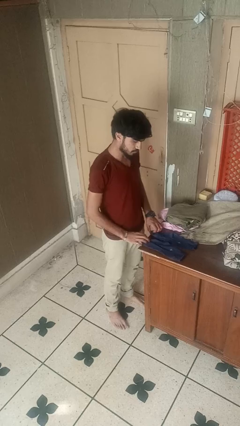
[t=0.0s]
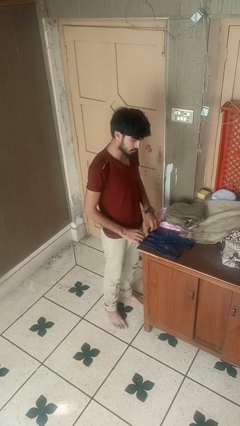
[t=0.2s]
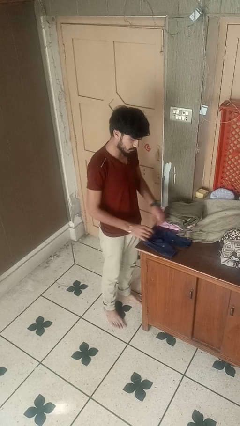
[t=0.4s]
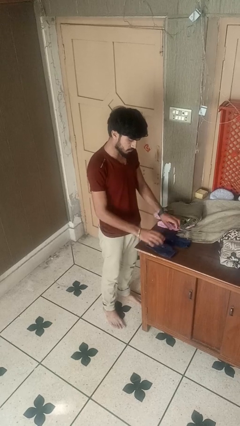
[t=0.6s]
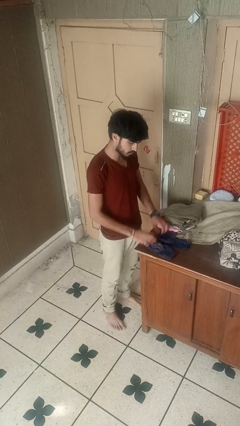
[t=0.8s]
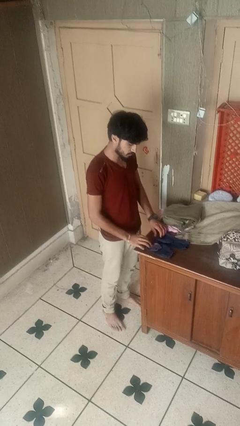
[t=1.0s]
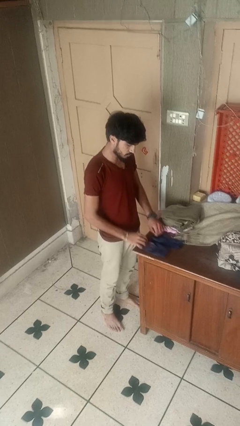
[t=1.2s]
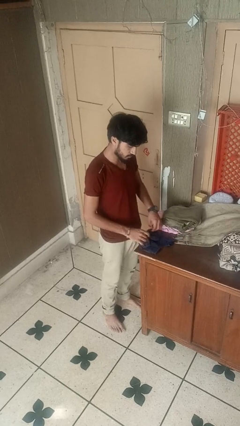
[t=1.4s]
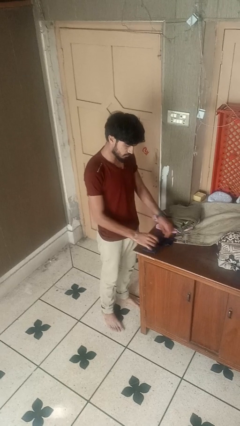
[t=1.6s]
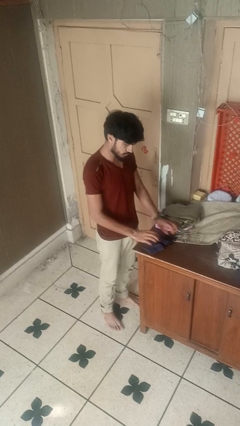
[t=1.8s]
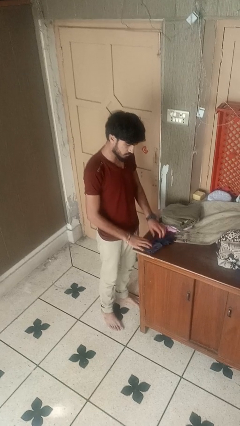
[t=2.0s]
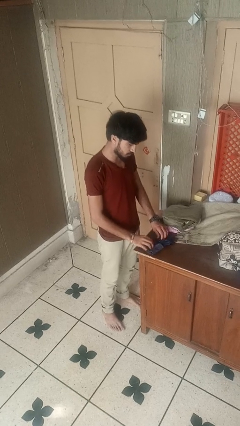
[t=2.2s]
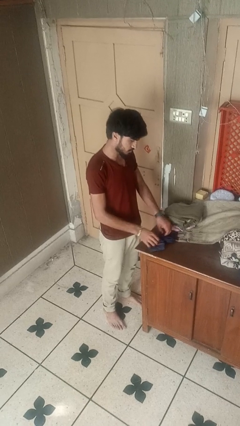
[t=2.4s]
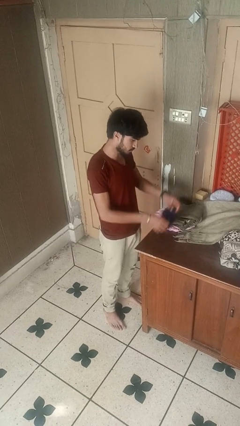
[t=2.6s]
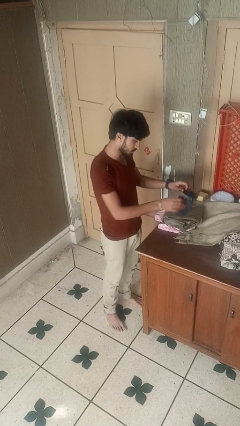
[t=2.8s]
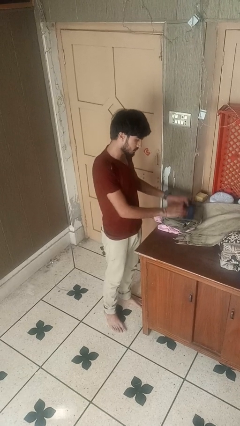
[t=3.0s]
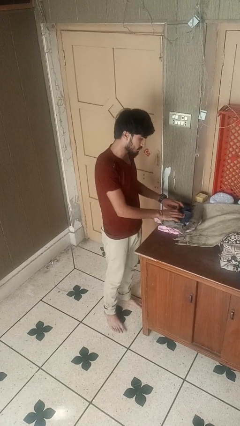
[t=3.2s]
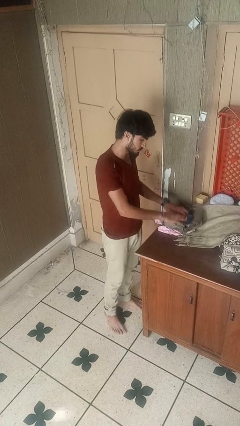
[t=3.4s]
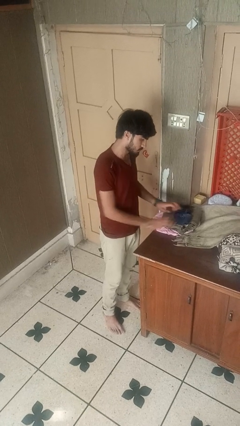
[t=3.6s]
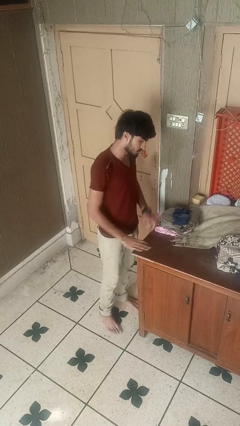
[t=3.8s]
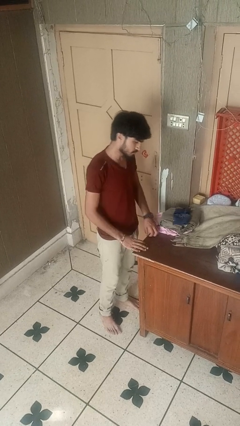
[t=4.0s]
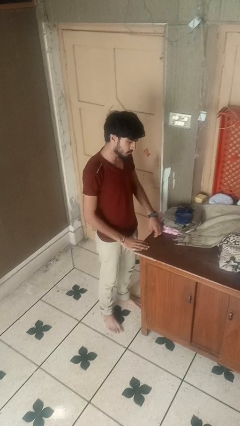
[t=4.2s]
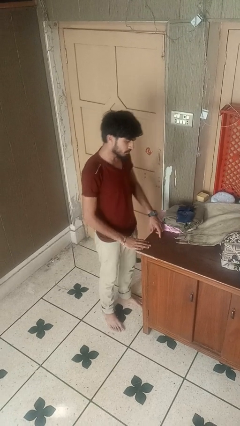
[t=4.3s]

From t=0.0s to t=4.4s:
person folds socks

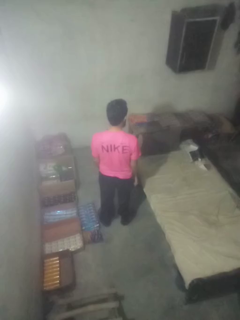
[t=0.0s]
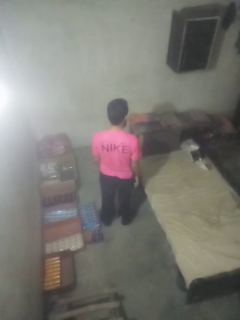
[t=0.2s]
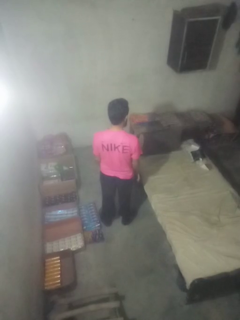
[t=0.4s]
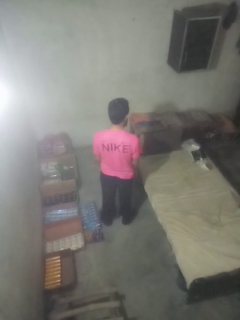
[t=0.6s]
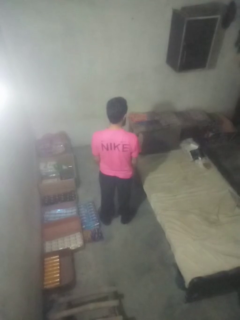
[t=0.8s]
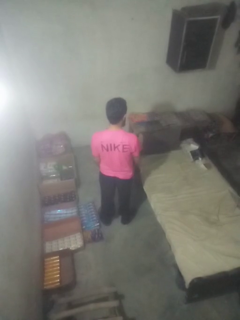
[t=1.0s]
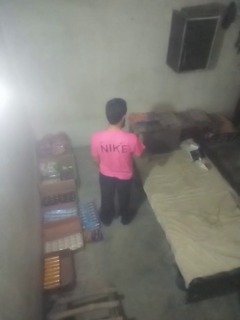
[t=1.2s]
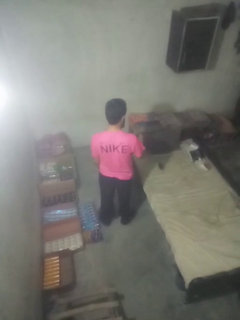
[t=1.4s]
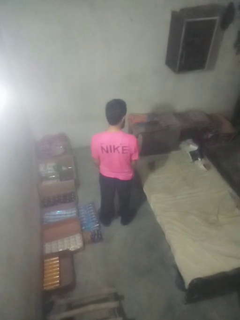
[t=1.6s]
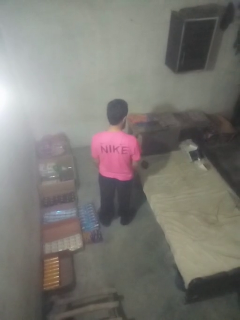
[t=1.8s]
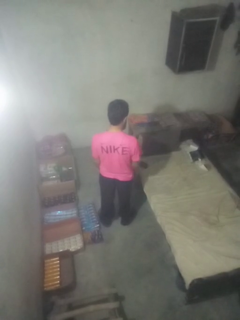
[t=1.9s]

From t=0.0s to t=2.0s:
person throws object on bed

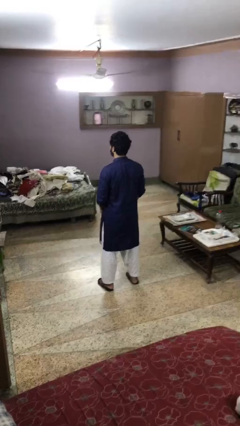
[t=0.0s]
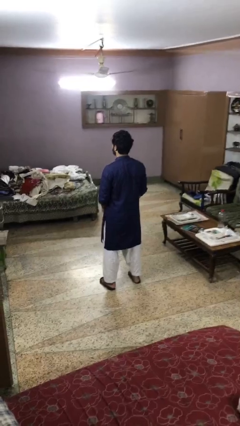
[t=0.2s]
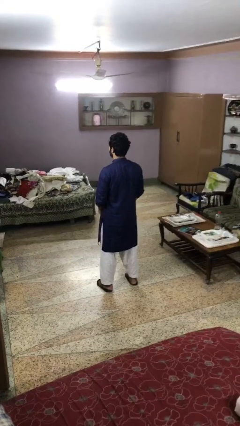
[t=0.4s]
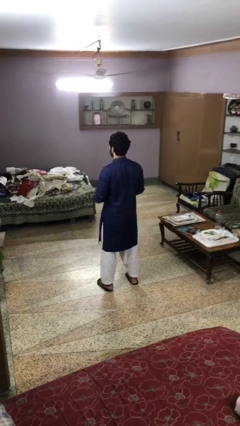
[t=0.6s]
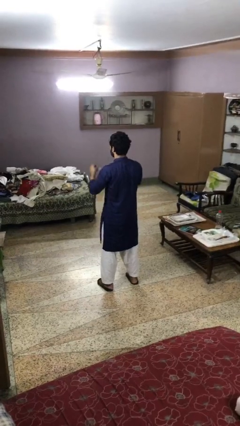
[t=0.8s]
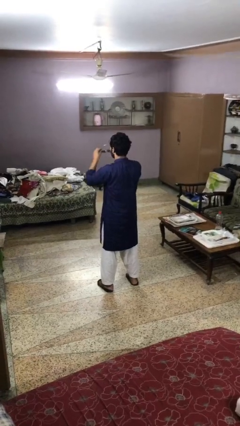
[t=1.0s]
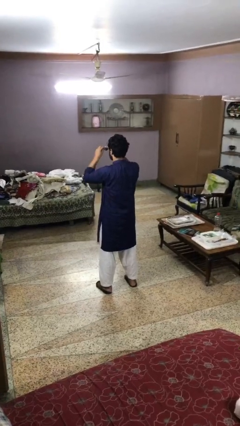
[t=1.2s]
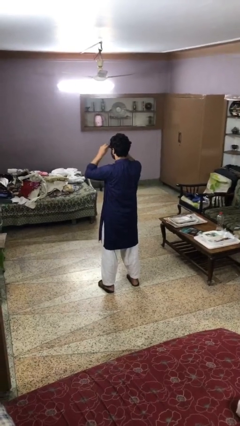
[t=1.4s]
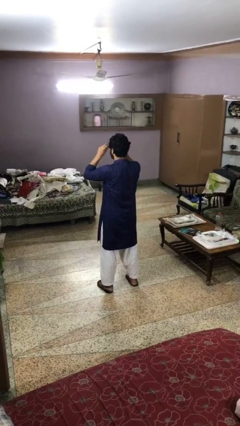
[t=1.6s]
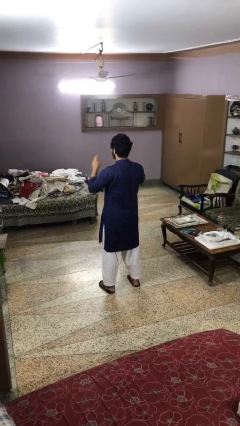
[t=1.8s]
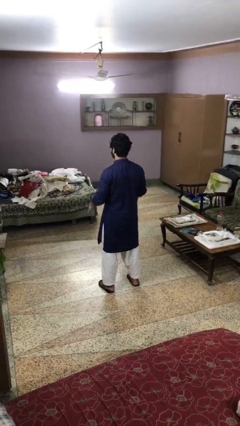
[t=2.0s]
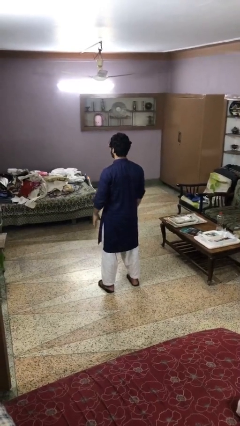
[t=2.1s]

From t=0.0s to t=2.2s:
person puts on sunglasses

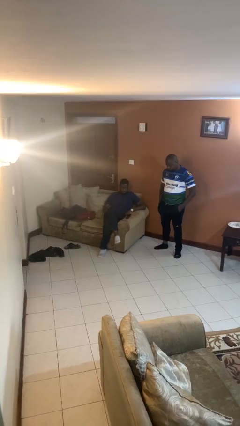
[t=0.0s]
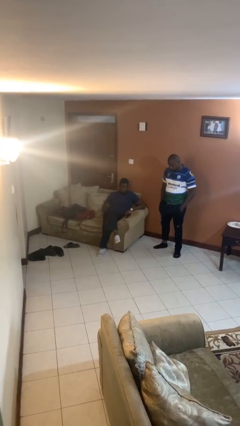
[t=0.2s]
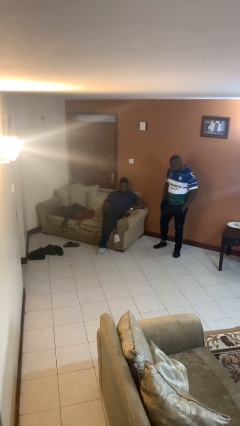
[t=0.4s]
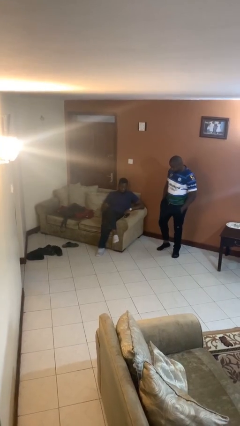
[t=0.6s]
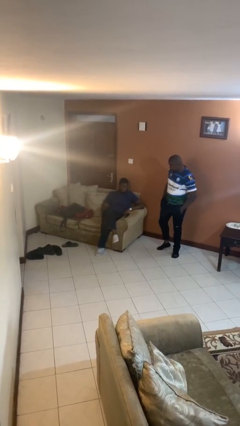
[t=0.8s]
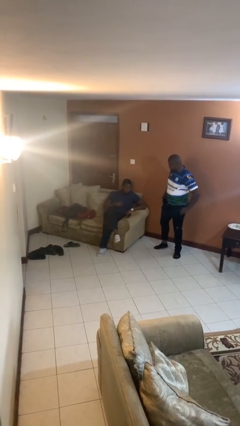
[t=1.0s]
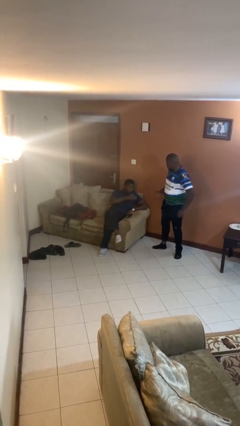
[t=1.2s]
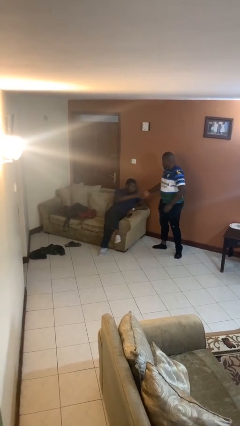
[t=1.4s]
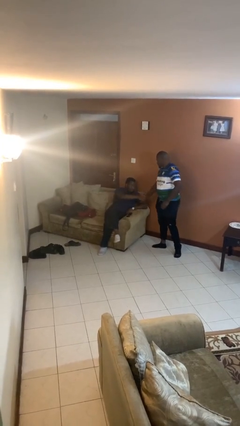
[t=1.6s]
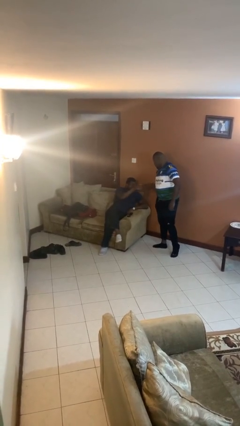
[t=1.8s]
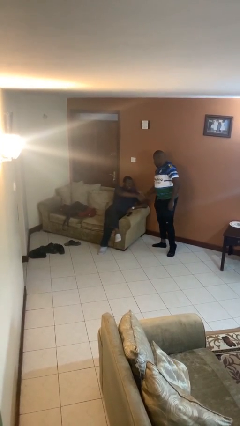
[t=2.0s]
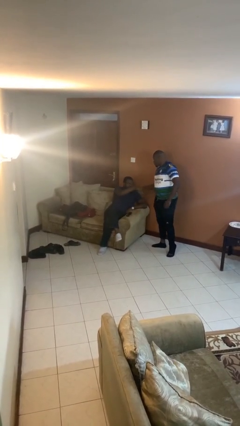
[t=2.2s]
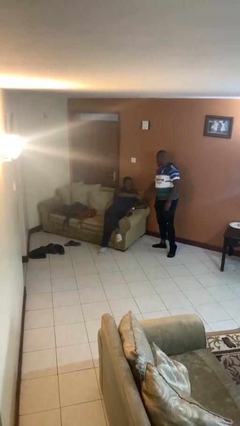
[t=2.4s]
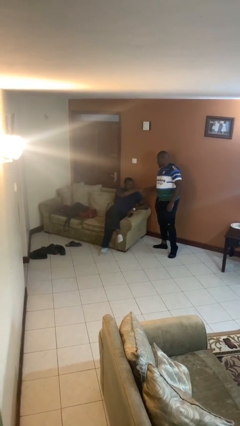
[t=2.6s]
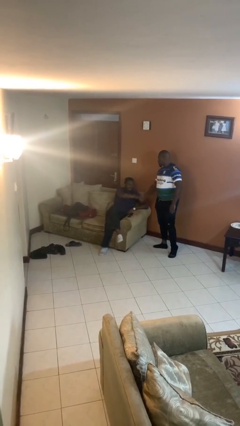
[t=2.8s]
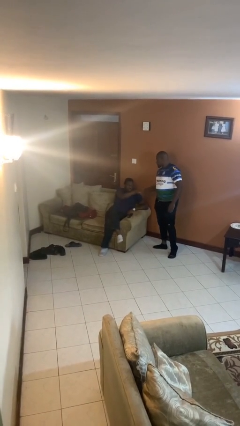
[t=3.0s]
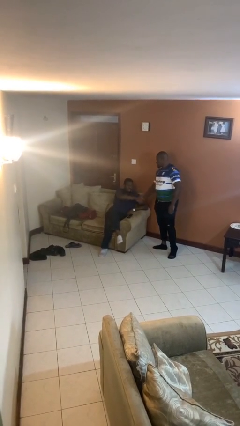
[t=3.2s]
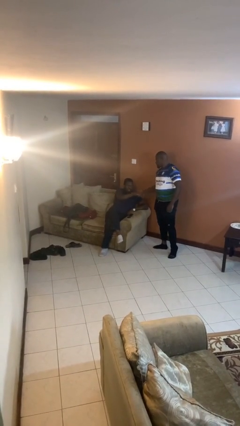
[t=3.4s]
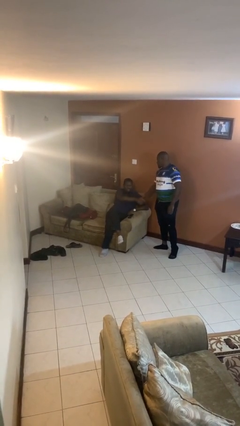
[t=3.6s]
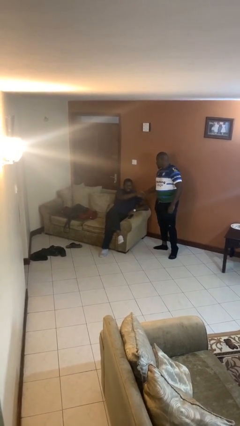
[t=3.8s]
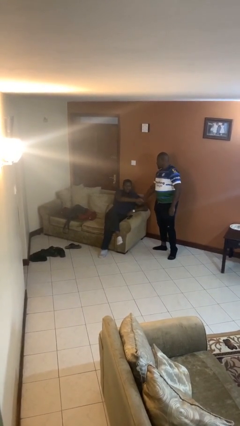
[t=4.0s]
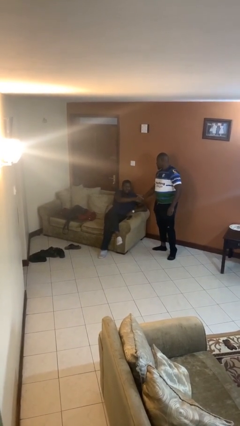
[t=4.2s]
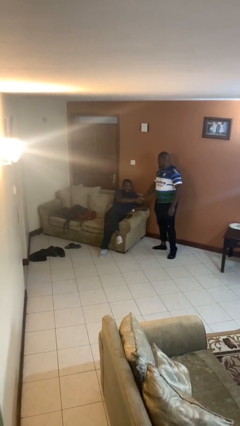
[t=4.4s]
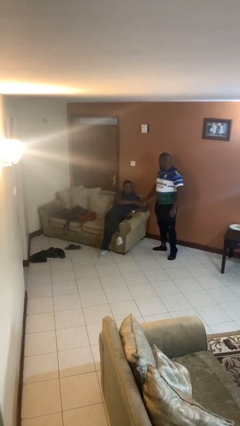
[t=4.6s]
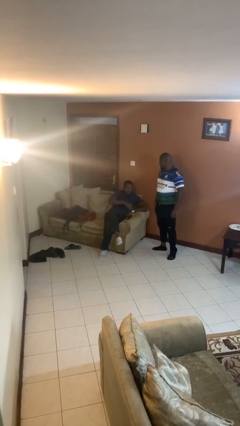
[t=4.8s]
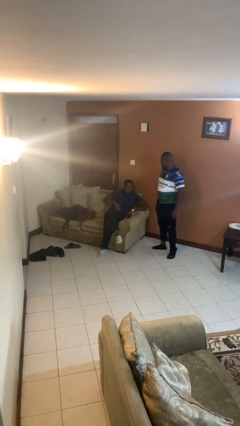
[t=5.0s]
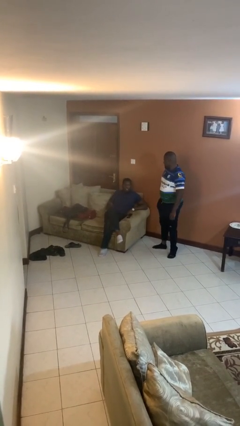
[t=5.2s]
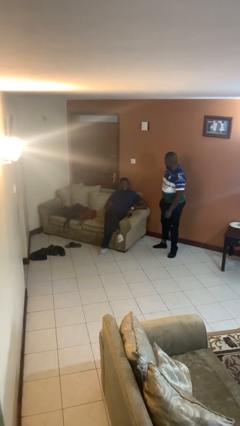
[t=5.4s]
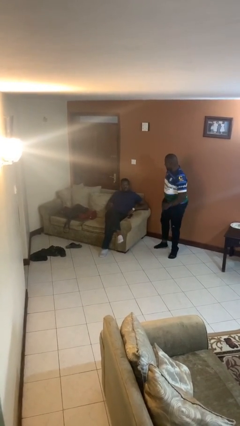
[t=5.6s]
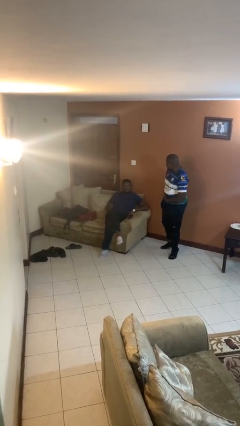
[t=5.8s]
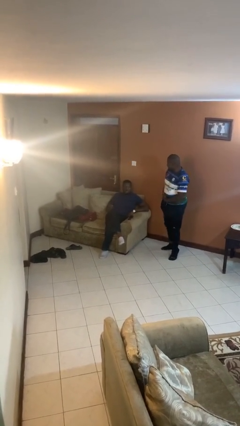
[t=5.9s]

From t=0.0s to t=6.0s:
person shakes hand

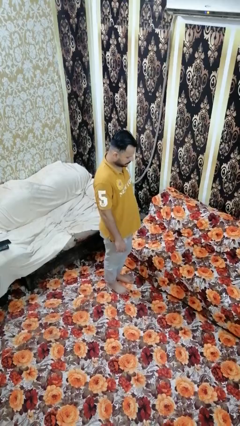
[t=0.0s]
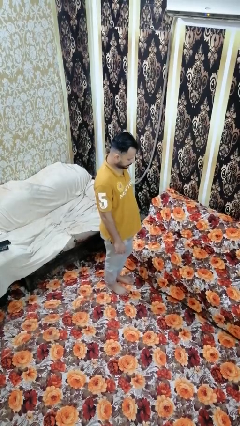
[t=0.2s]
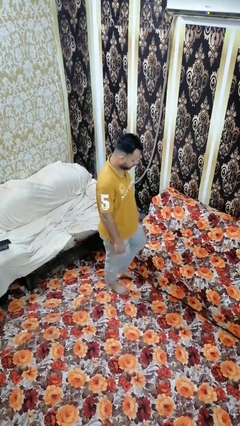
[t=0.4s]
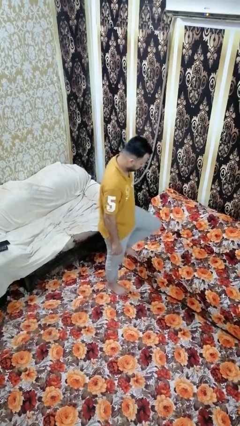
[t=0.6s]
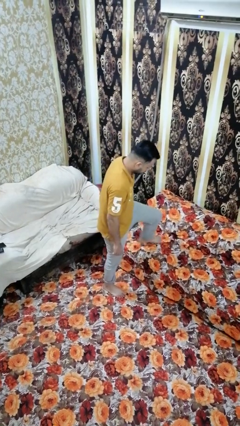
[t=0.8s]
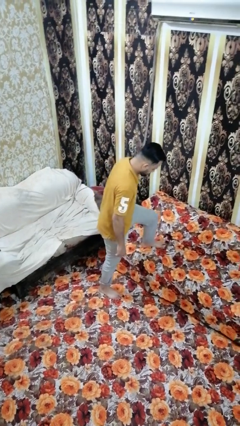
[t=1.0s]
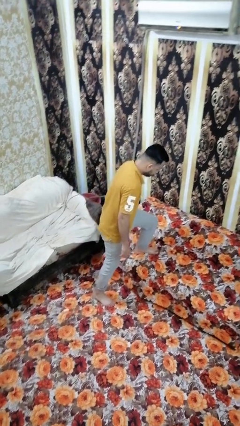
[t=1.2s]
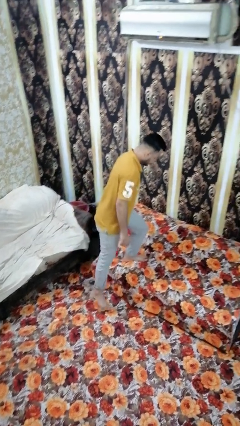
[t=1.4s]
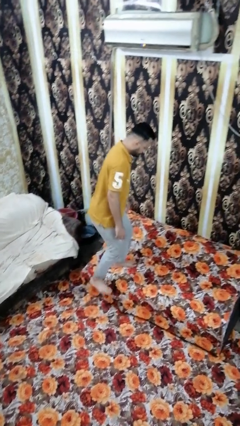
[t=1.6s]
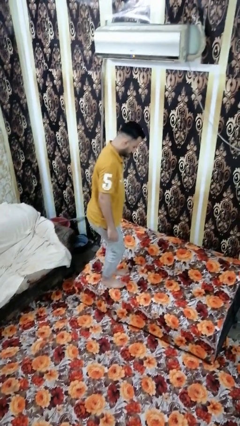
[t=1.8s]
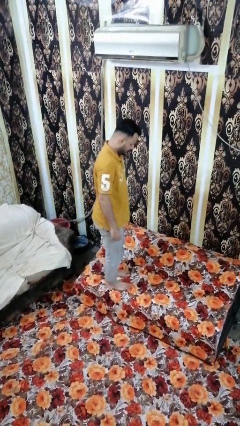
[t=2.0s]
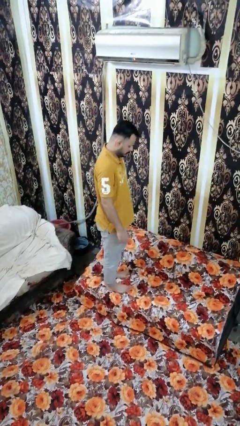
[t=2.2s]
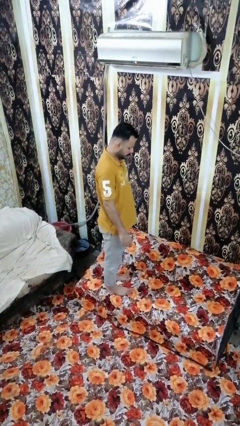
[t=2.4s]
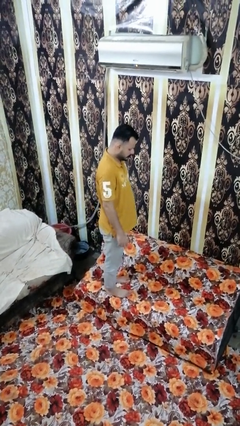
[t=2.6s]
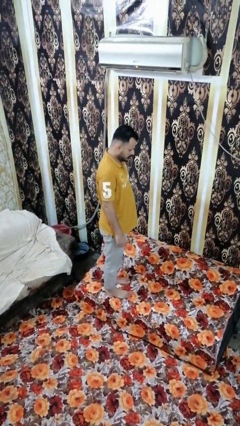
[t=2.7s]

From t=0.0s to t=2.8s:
person climbs on couch

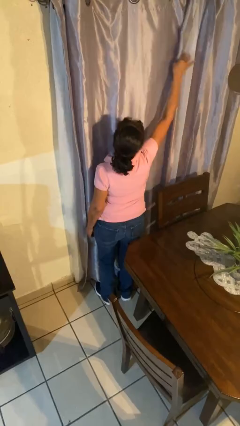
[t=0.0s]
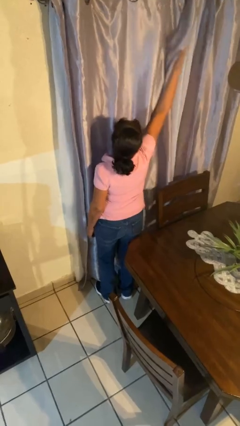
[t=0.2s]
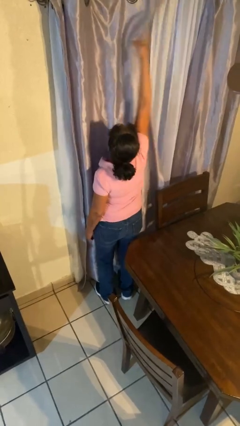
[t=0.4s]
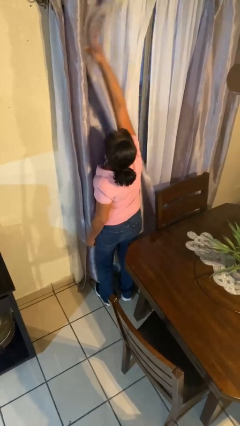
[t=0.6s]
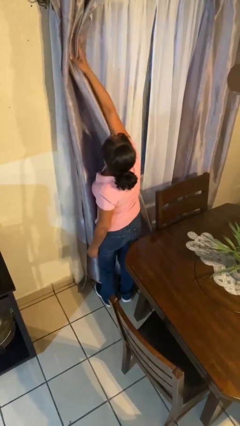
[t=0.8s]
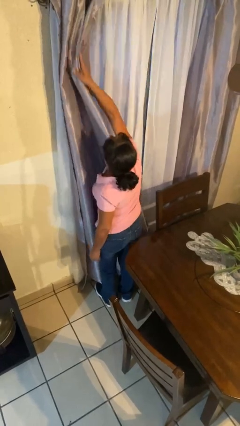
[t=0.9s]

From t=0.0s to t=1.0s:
person opens curtains
